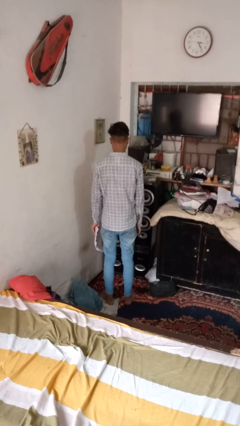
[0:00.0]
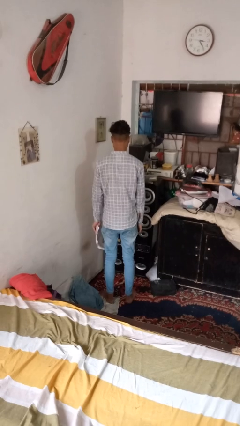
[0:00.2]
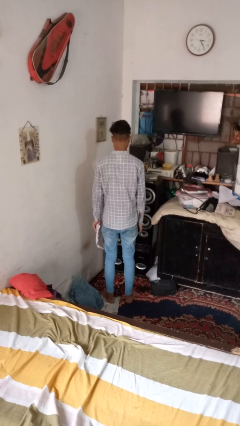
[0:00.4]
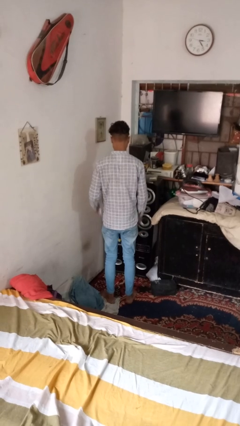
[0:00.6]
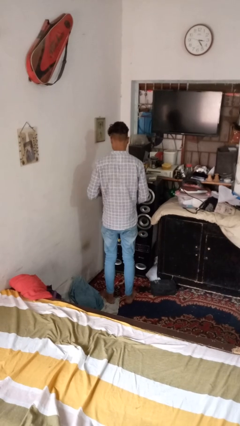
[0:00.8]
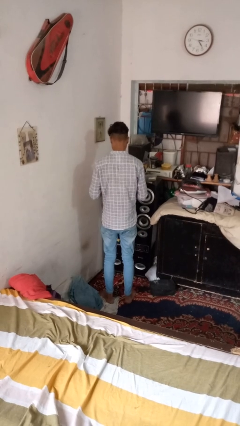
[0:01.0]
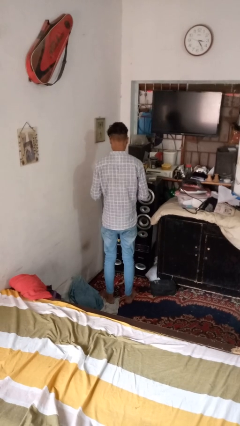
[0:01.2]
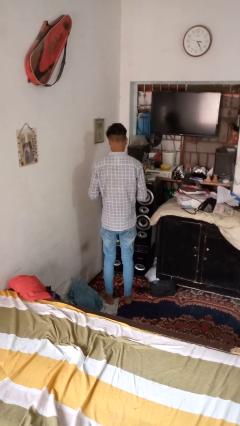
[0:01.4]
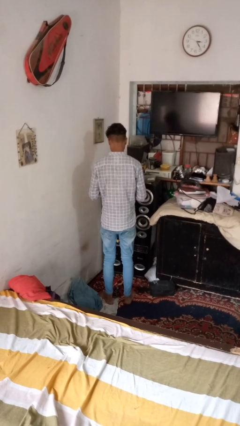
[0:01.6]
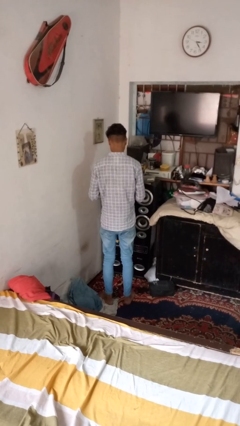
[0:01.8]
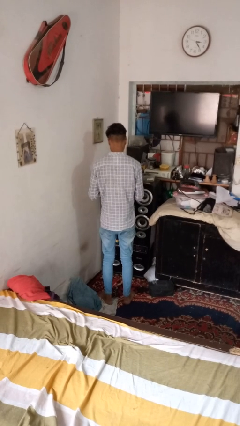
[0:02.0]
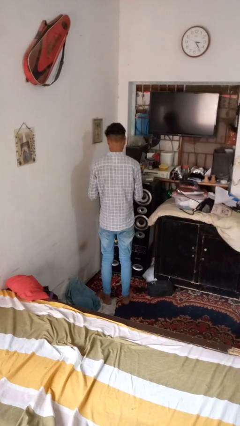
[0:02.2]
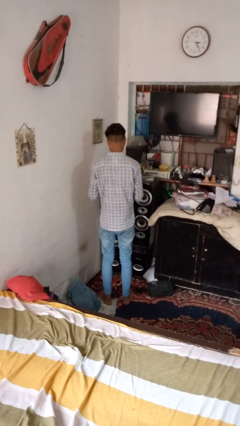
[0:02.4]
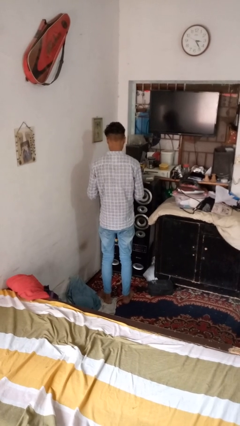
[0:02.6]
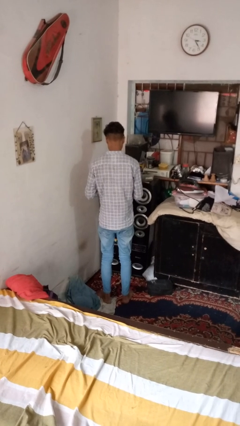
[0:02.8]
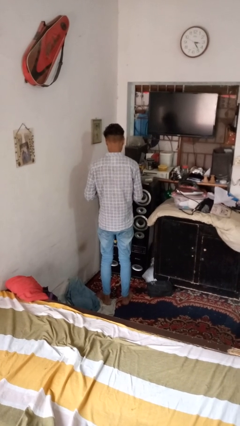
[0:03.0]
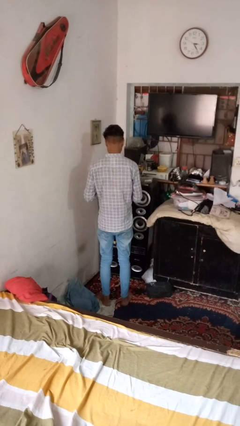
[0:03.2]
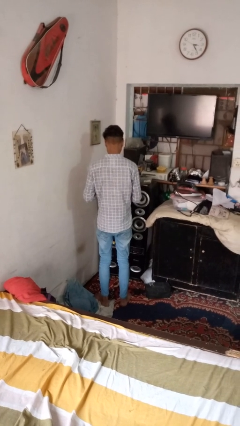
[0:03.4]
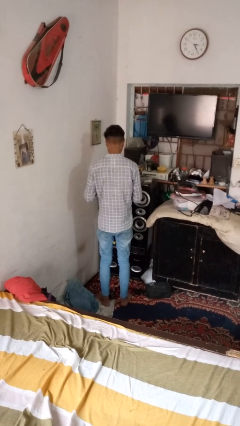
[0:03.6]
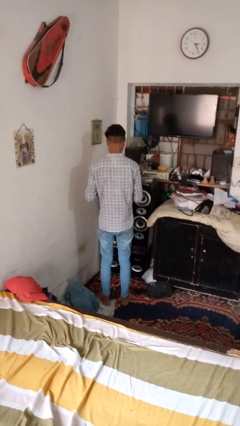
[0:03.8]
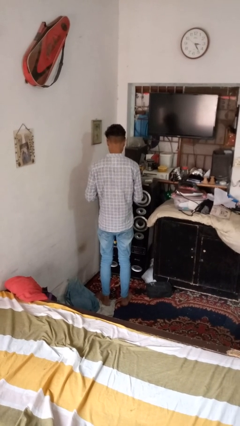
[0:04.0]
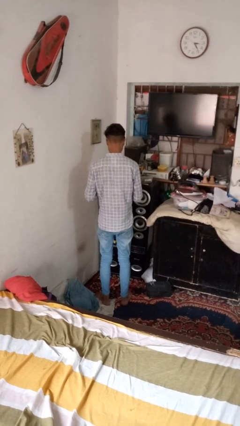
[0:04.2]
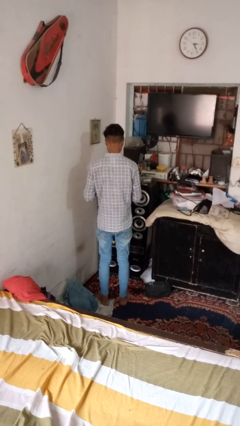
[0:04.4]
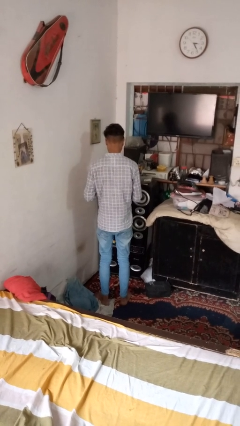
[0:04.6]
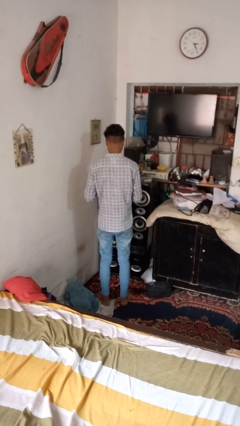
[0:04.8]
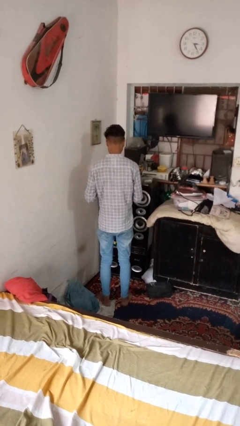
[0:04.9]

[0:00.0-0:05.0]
person crumples paper

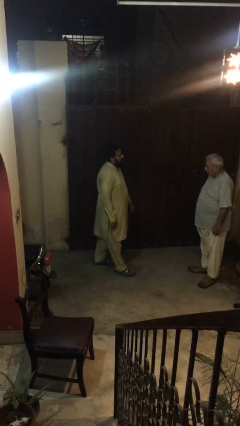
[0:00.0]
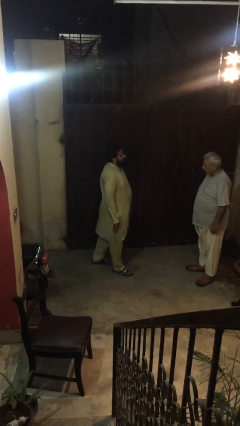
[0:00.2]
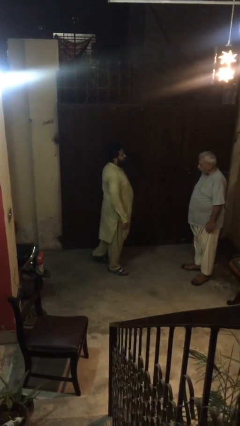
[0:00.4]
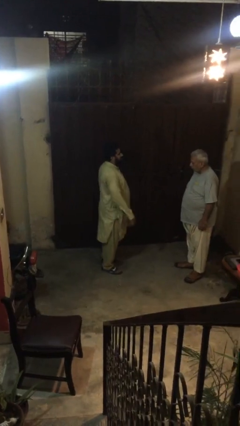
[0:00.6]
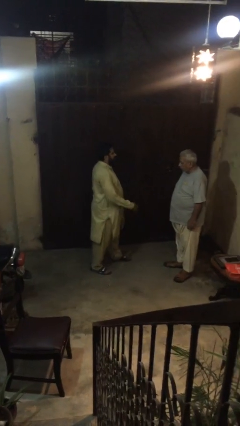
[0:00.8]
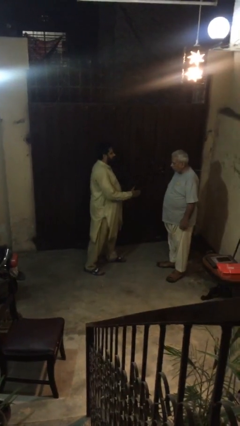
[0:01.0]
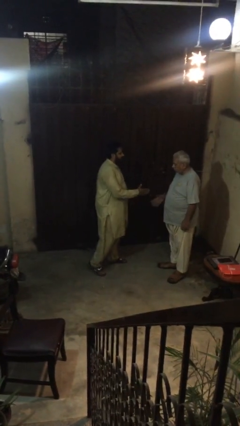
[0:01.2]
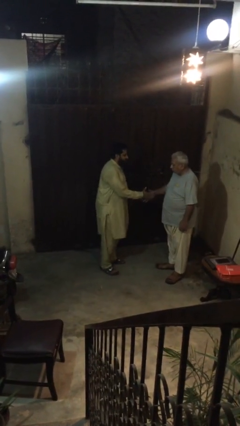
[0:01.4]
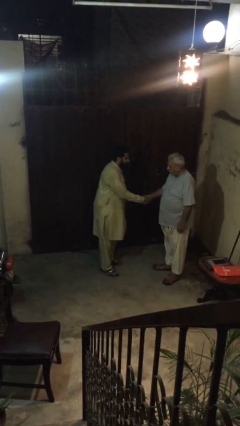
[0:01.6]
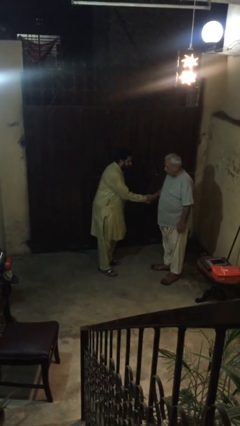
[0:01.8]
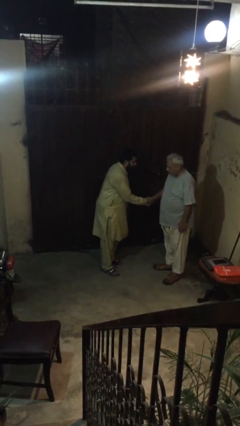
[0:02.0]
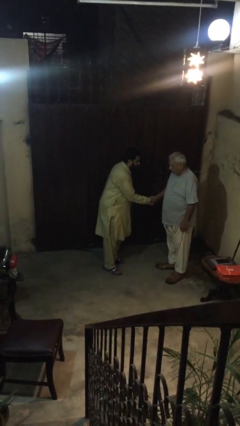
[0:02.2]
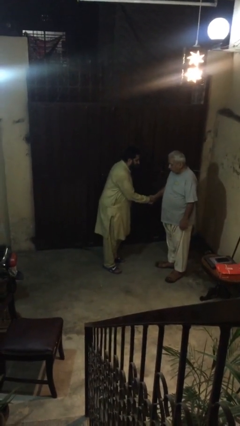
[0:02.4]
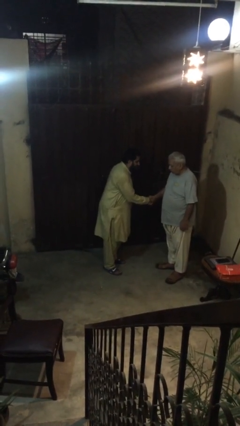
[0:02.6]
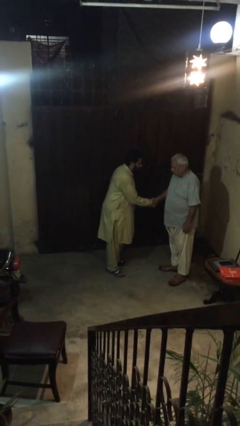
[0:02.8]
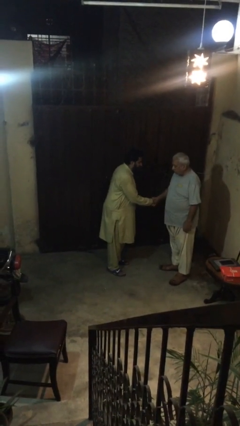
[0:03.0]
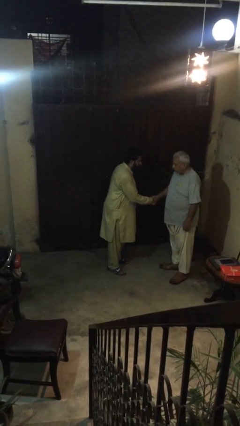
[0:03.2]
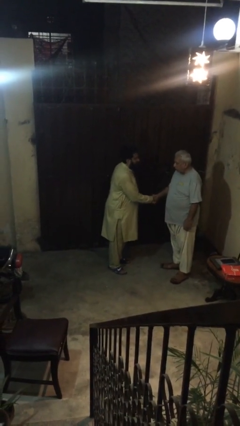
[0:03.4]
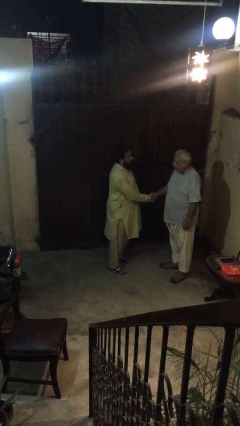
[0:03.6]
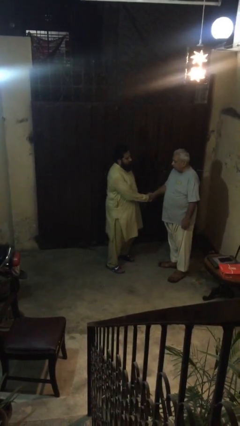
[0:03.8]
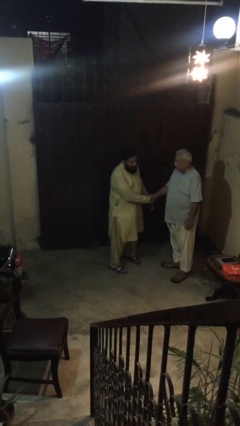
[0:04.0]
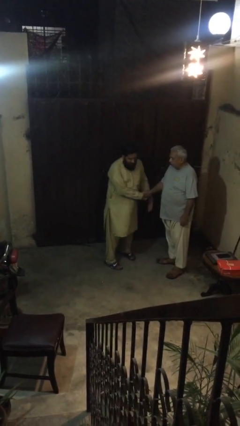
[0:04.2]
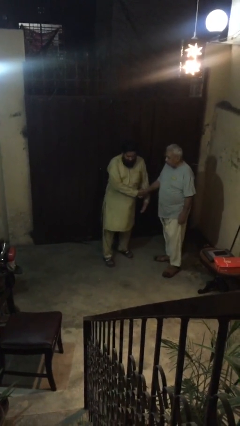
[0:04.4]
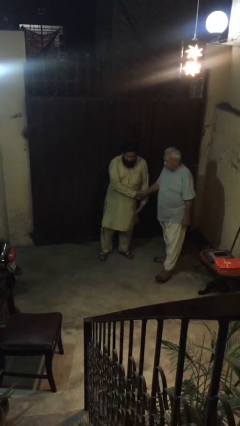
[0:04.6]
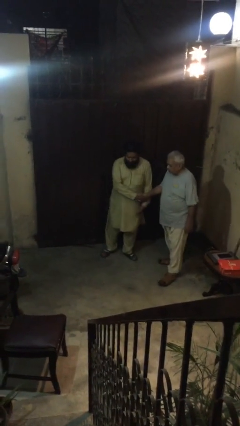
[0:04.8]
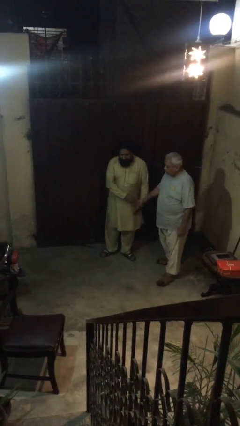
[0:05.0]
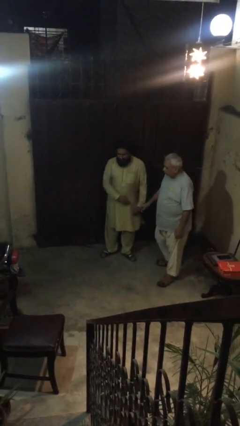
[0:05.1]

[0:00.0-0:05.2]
person shakes hand

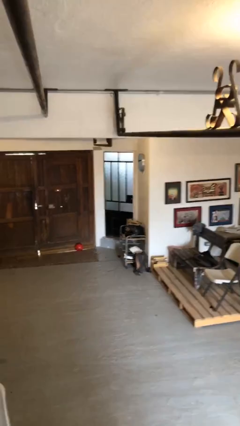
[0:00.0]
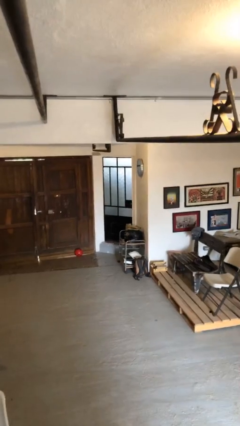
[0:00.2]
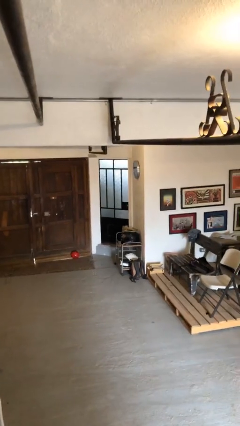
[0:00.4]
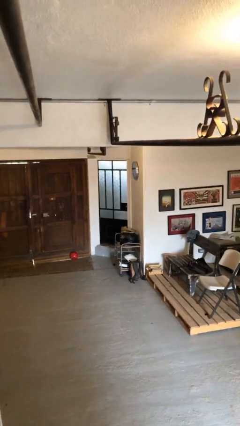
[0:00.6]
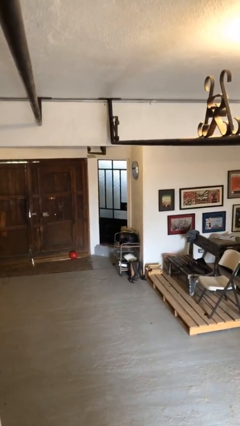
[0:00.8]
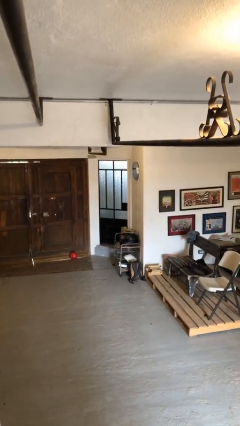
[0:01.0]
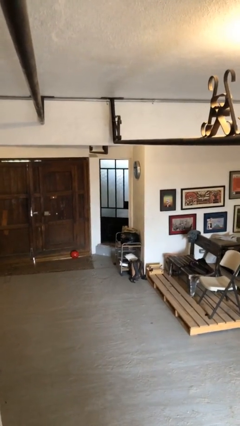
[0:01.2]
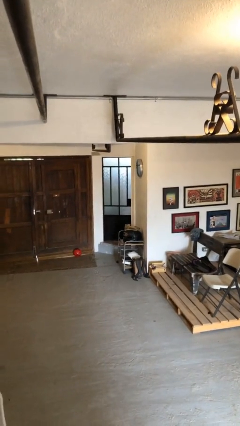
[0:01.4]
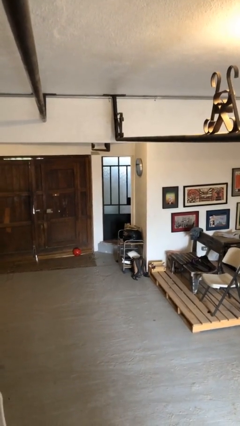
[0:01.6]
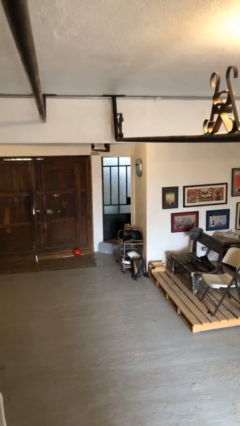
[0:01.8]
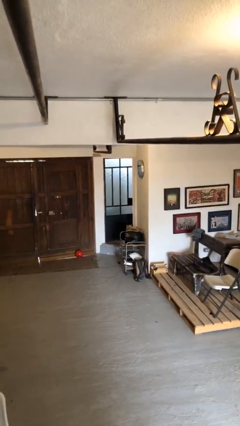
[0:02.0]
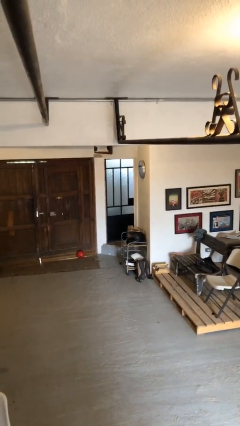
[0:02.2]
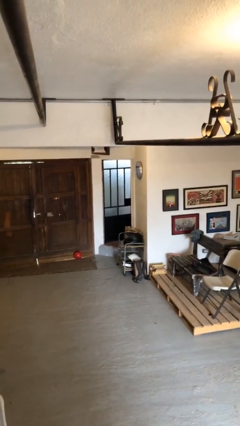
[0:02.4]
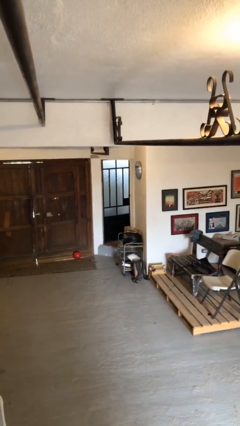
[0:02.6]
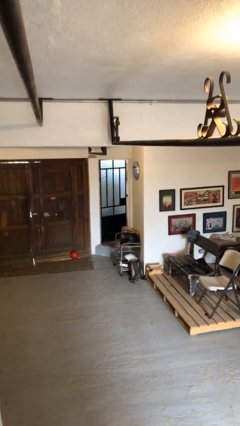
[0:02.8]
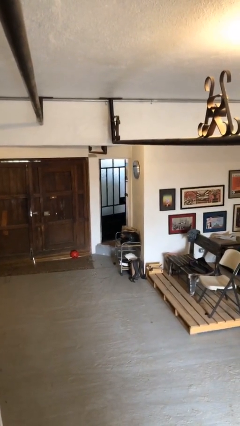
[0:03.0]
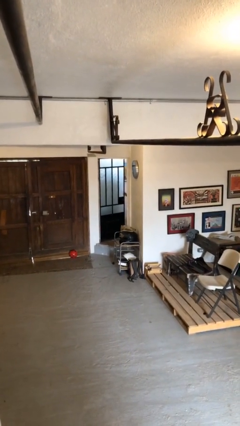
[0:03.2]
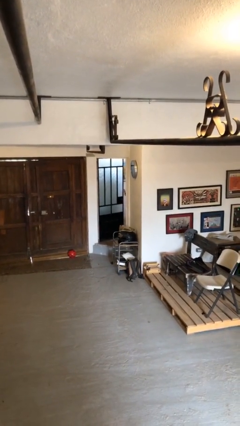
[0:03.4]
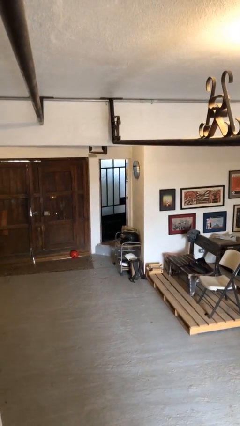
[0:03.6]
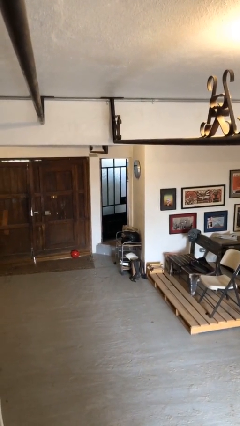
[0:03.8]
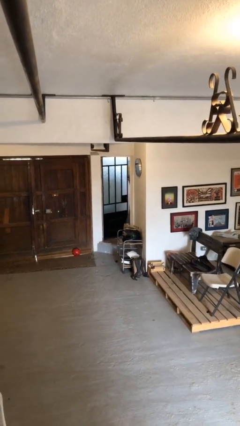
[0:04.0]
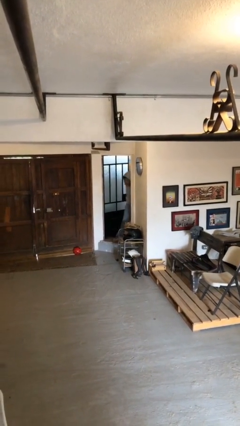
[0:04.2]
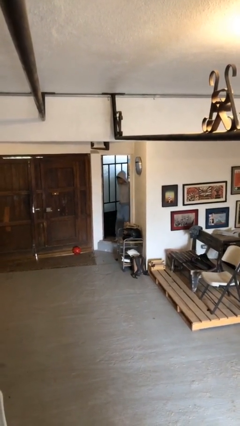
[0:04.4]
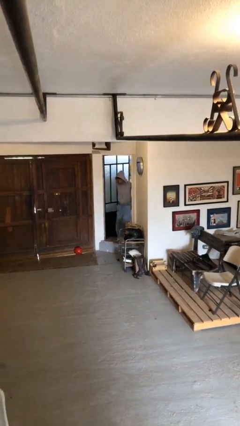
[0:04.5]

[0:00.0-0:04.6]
person opens facility door

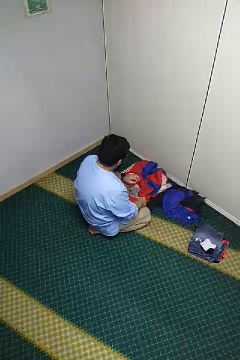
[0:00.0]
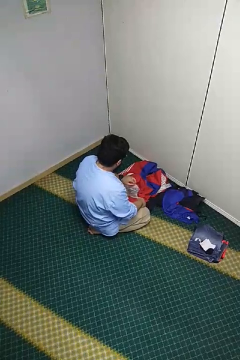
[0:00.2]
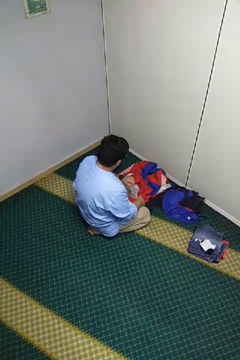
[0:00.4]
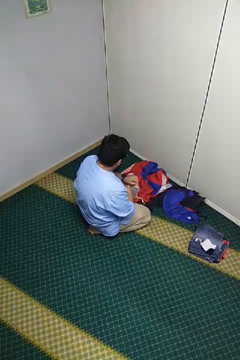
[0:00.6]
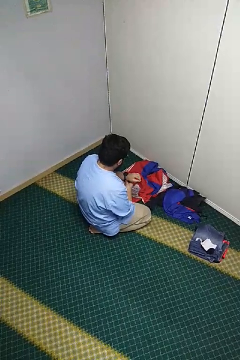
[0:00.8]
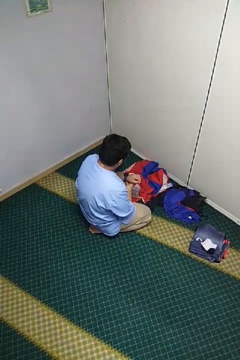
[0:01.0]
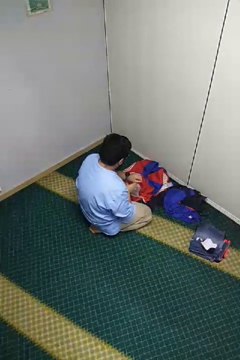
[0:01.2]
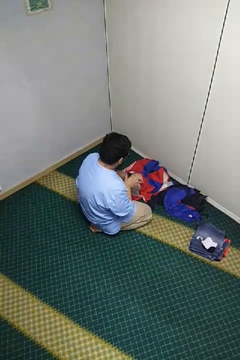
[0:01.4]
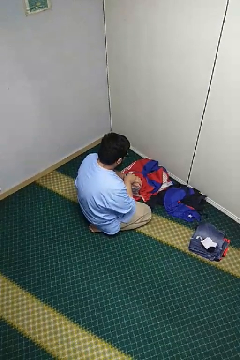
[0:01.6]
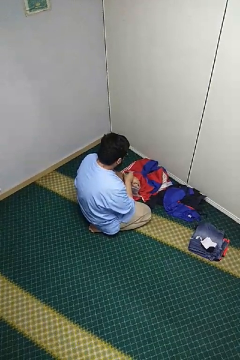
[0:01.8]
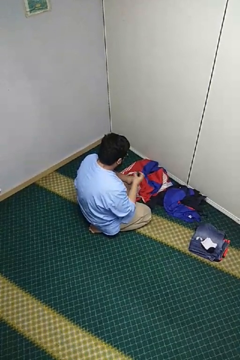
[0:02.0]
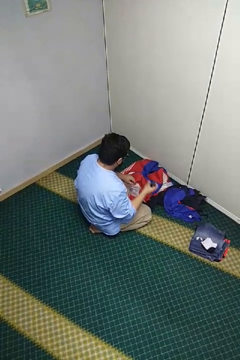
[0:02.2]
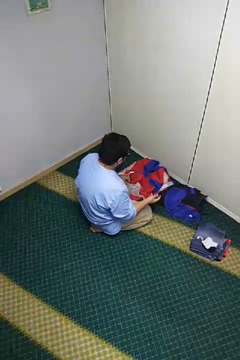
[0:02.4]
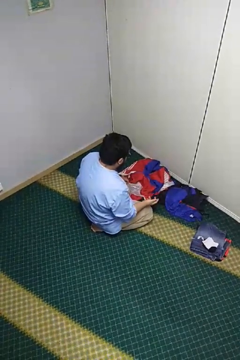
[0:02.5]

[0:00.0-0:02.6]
person takes off wristwatch

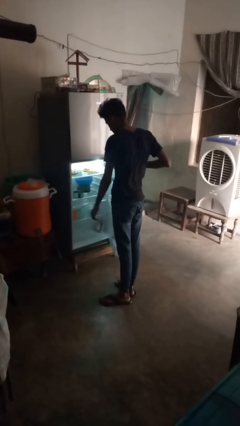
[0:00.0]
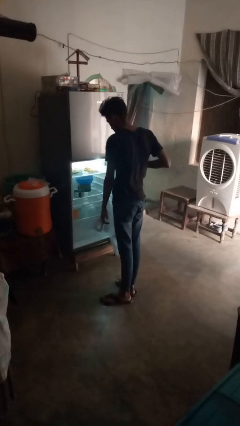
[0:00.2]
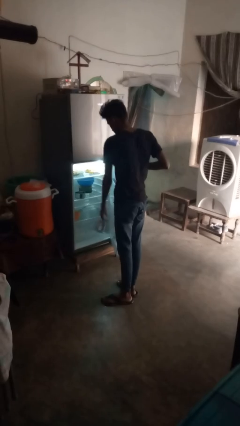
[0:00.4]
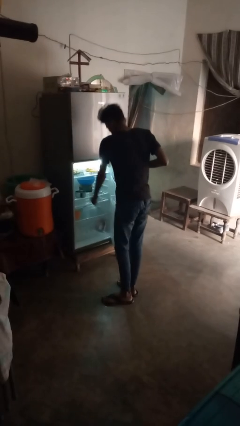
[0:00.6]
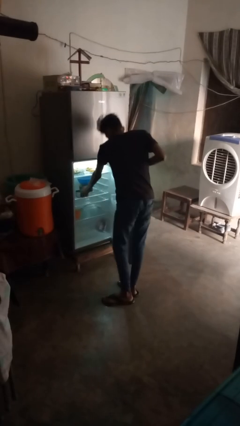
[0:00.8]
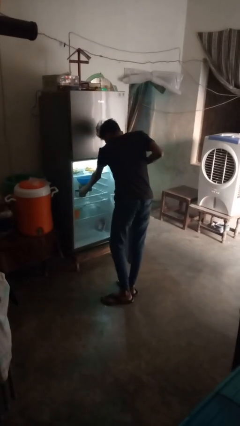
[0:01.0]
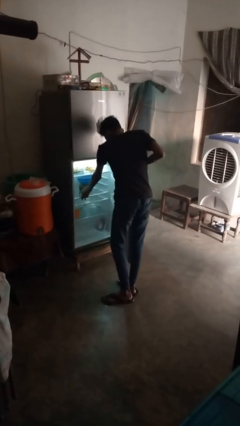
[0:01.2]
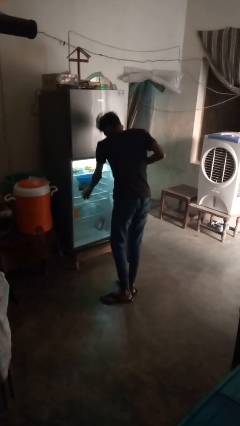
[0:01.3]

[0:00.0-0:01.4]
person takes object from refrigerator
